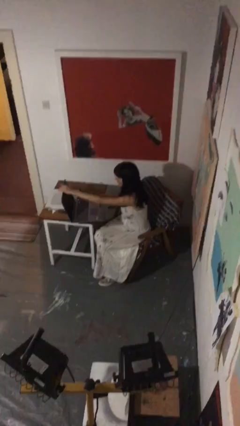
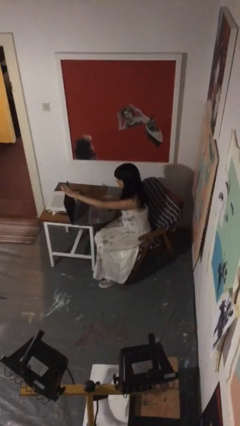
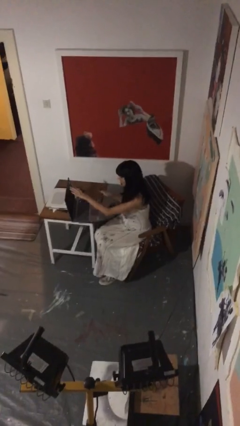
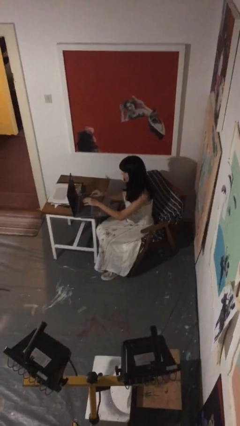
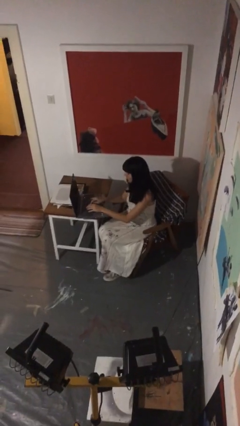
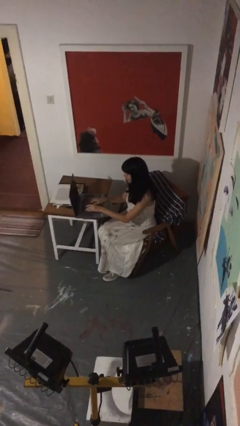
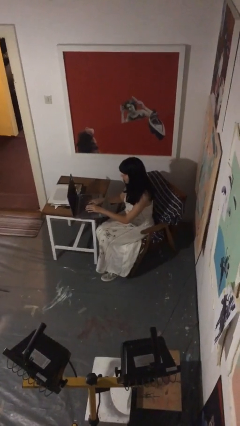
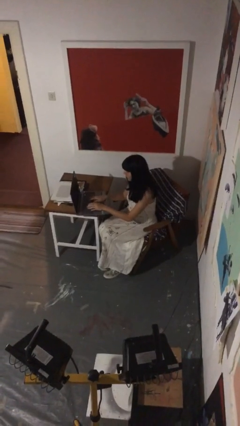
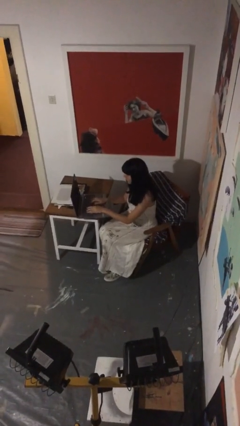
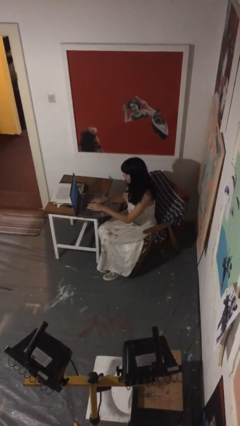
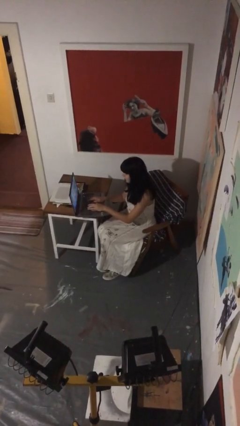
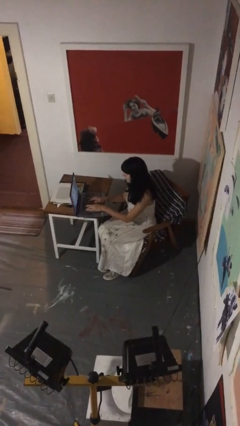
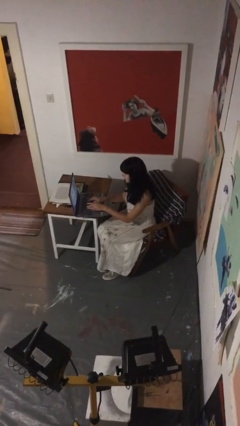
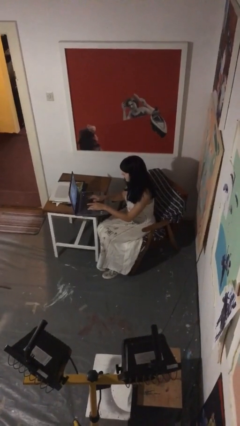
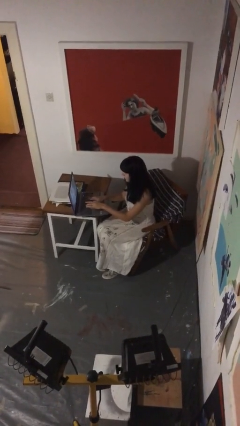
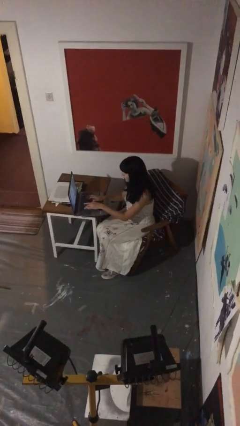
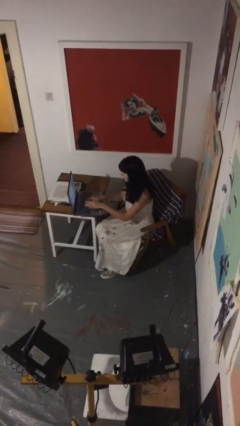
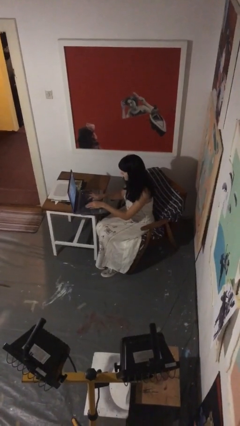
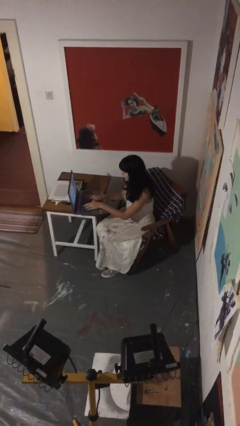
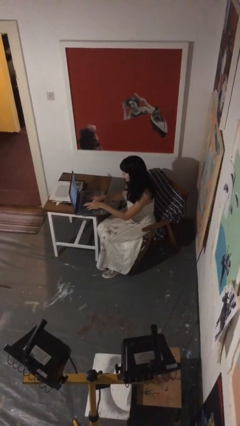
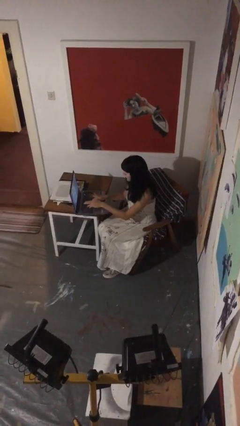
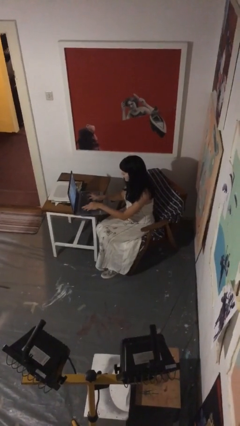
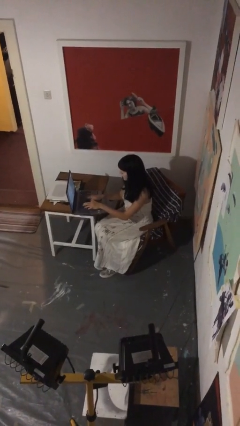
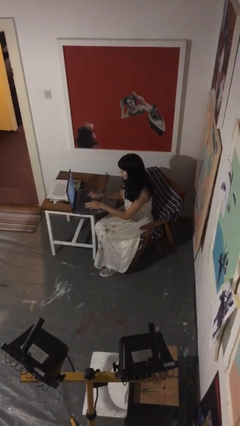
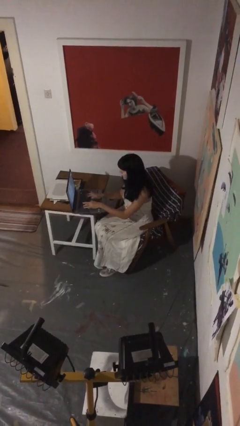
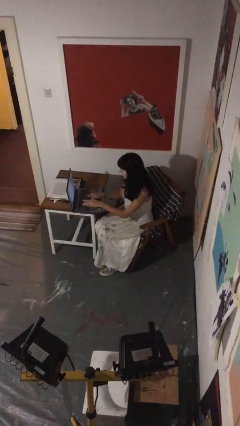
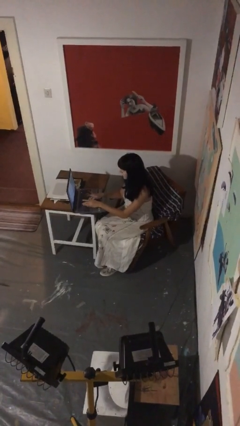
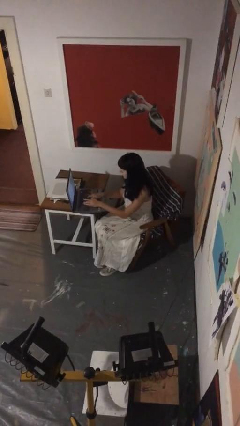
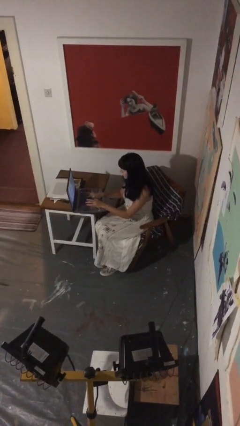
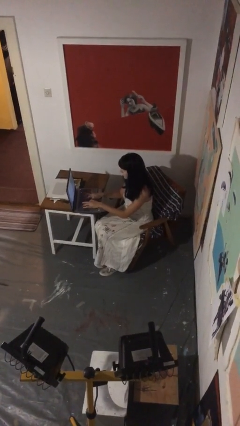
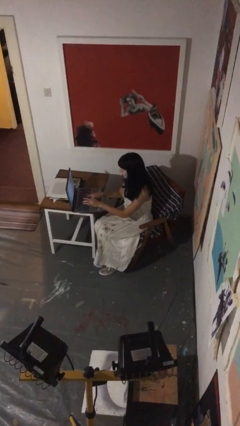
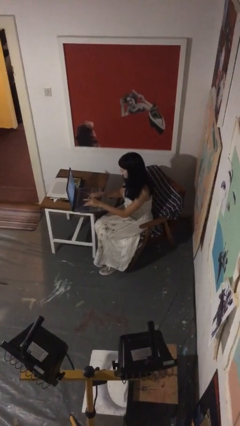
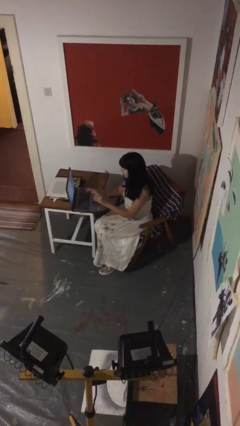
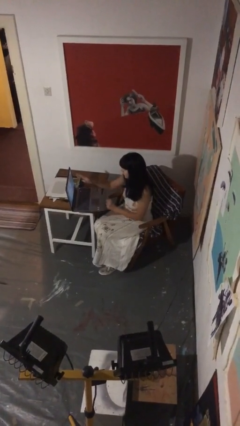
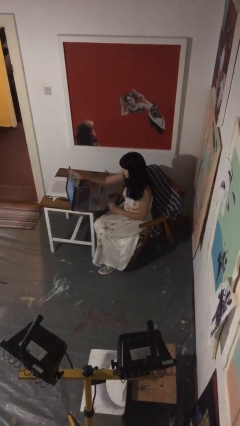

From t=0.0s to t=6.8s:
person interacts with laptop

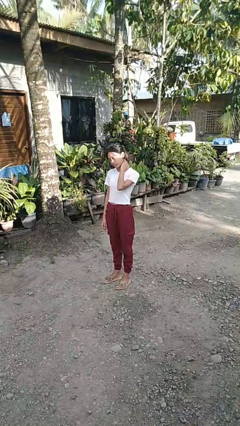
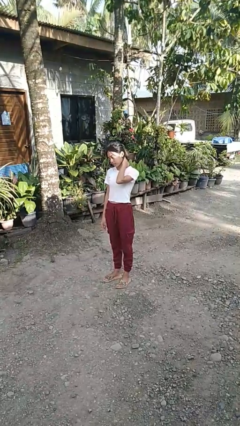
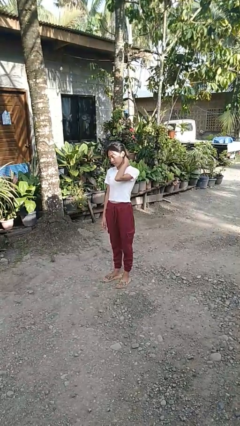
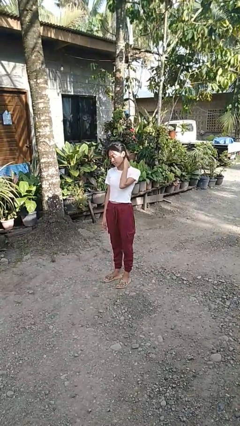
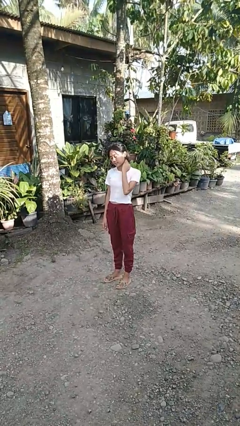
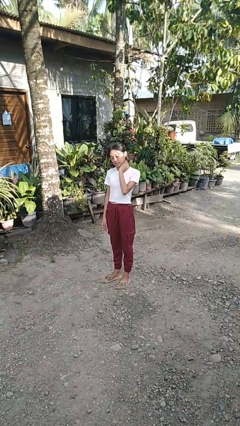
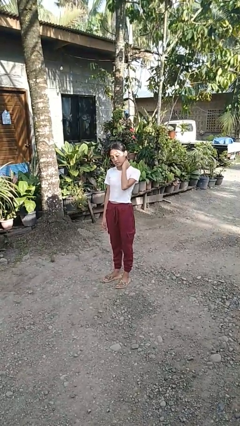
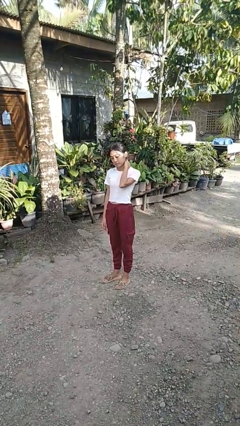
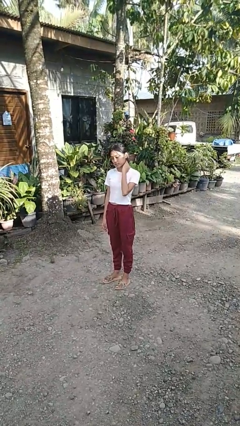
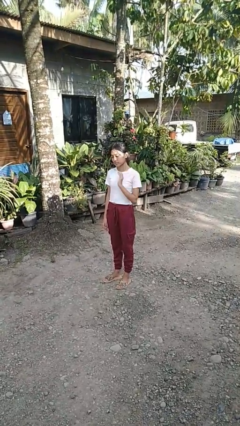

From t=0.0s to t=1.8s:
person rubs neck

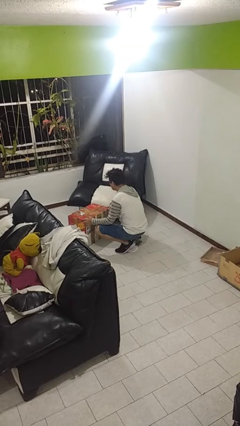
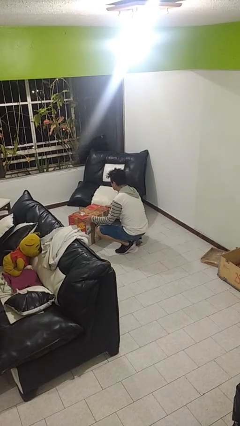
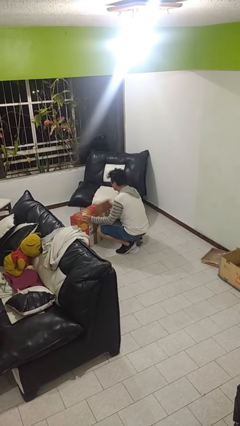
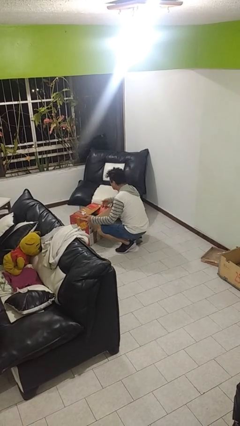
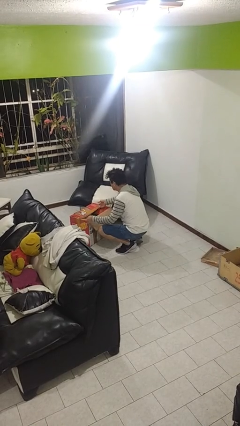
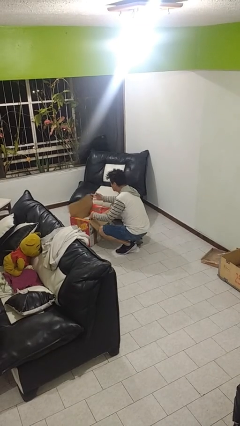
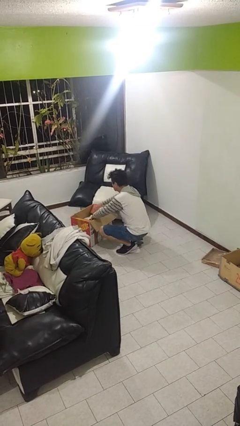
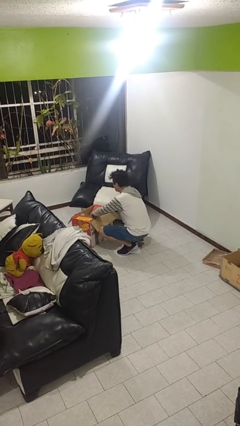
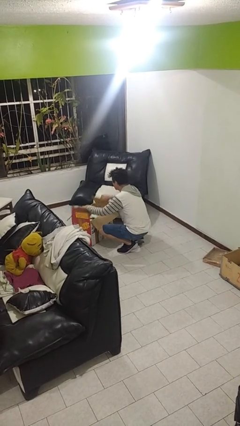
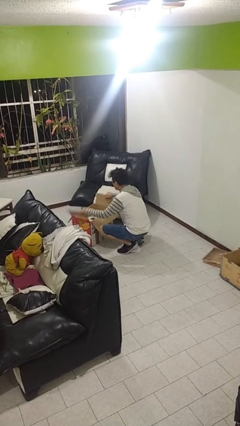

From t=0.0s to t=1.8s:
person opens box

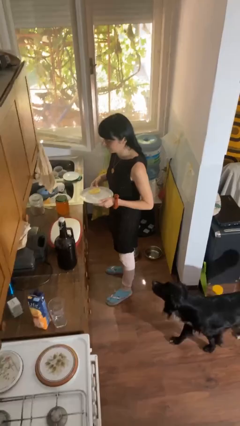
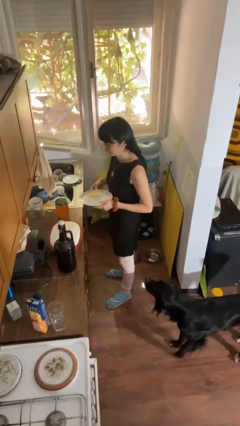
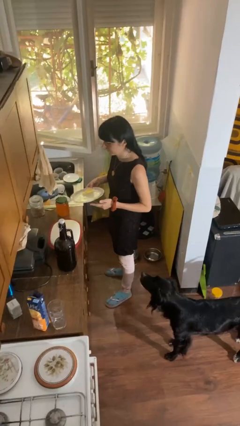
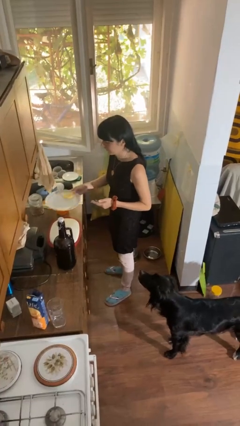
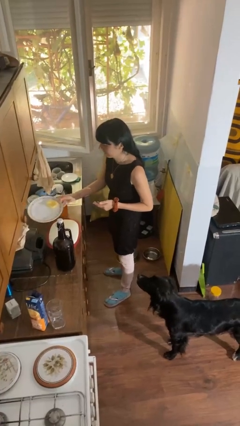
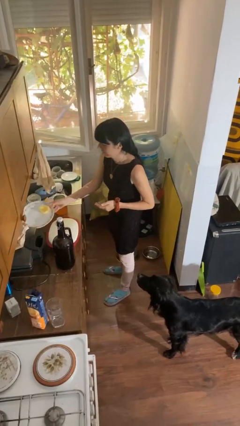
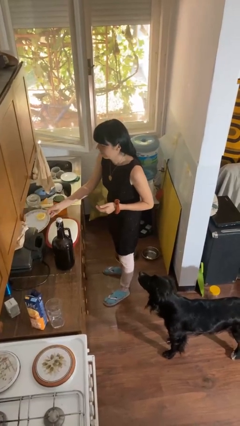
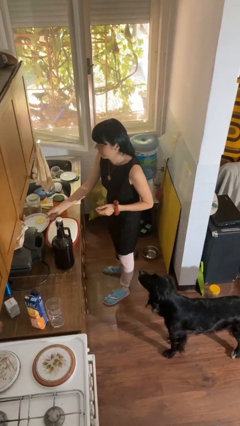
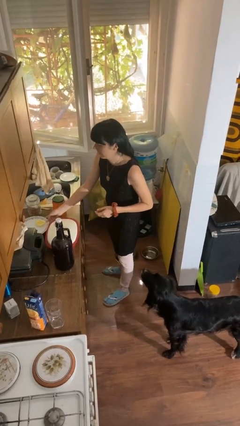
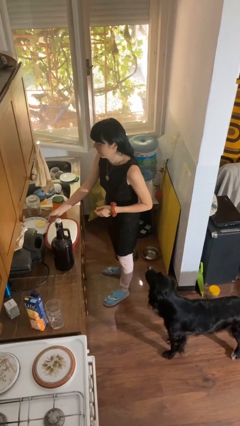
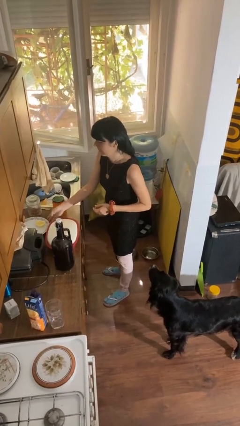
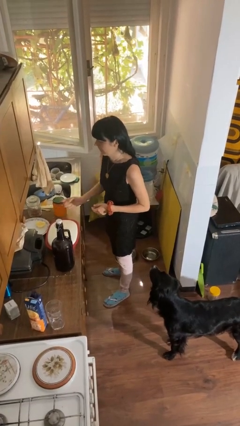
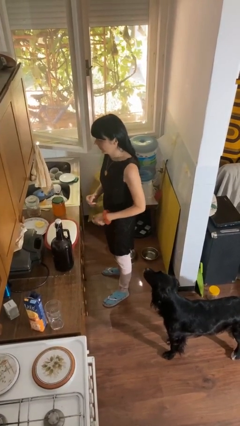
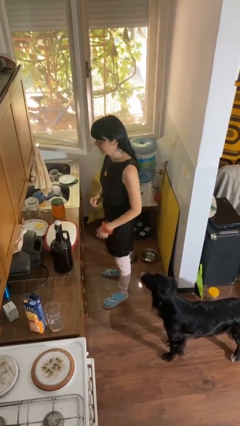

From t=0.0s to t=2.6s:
person puts down object on countertop

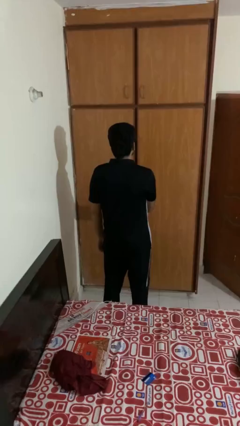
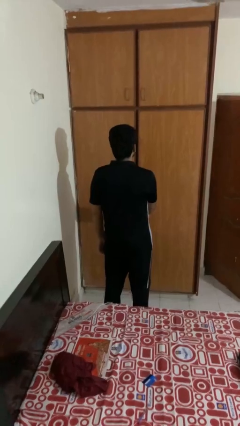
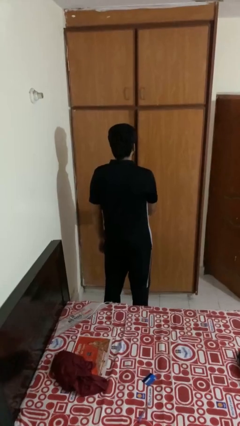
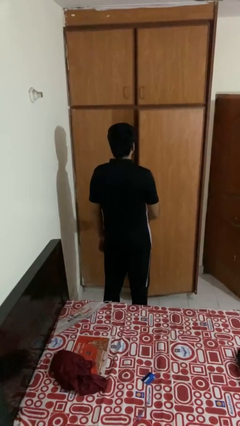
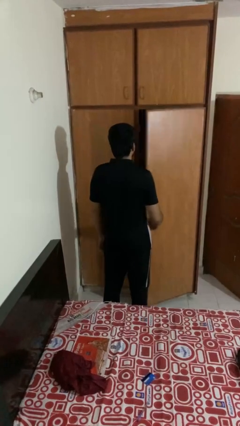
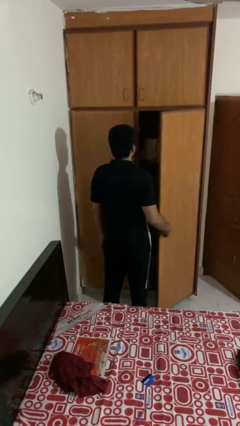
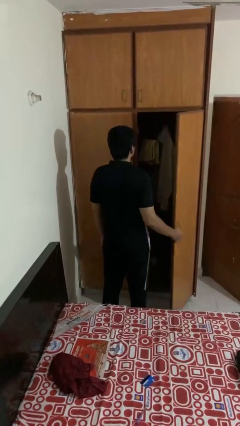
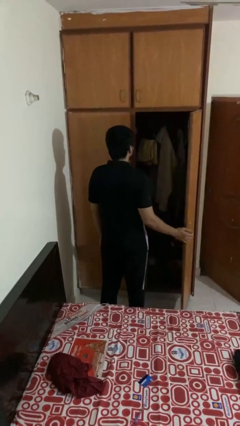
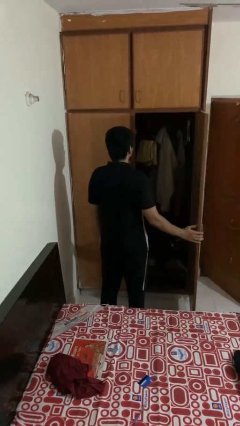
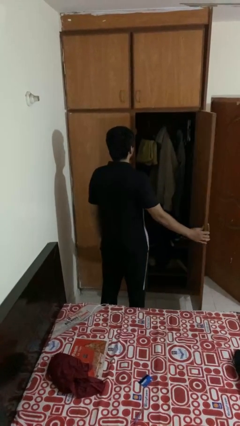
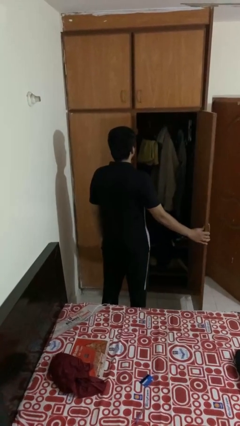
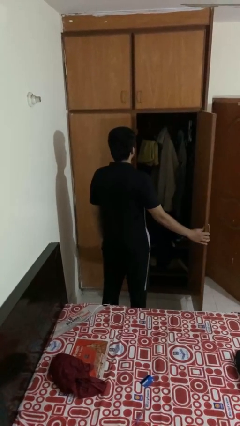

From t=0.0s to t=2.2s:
person opens closet door

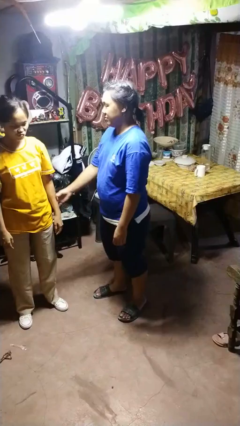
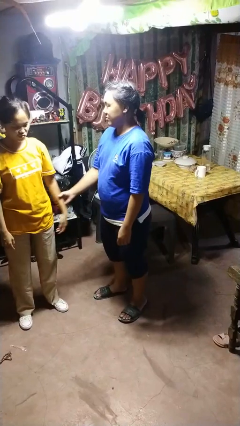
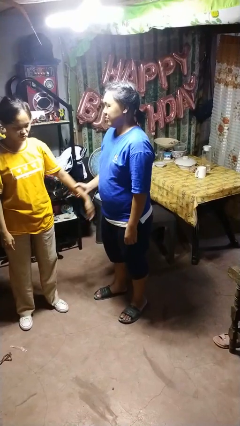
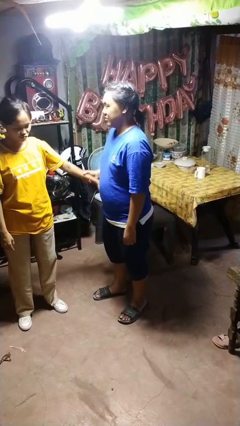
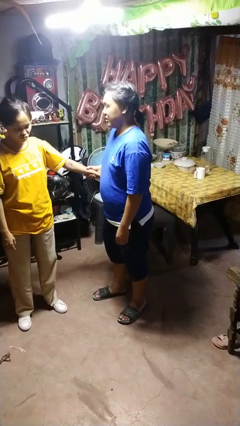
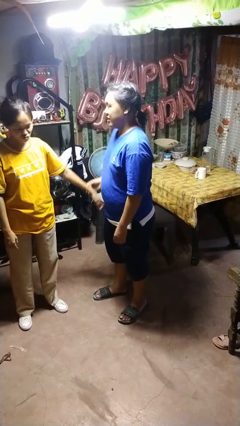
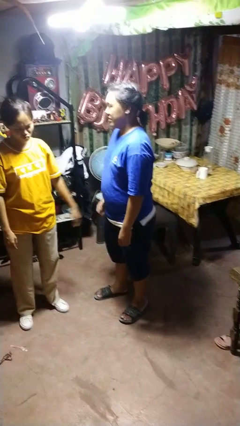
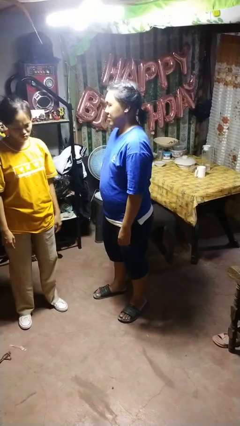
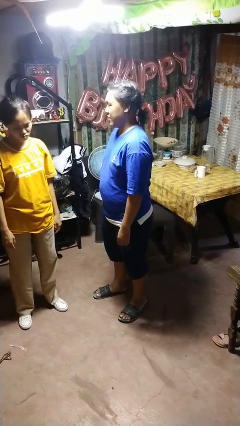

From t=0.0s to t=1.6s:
person grabs person by forearm

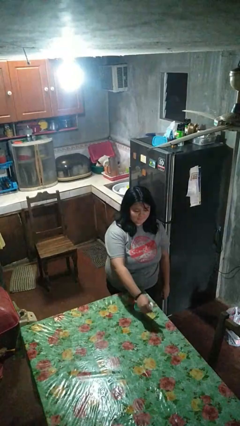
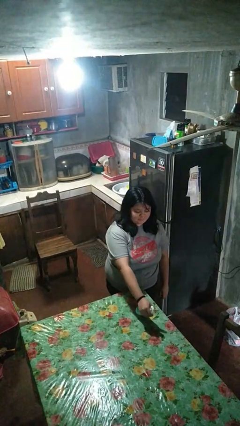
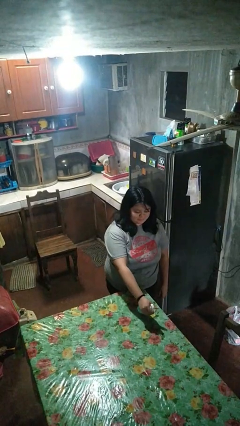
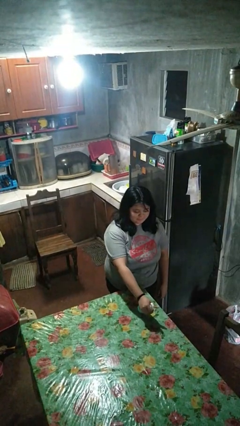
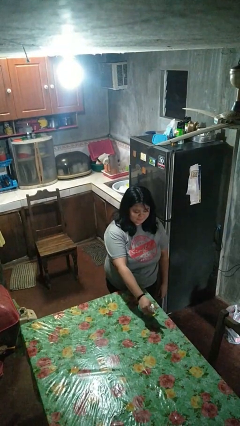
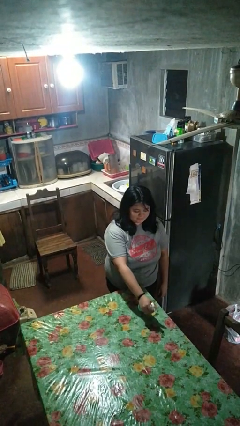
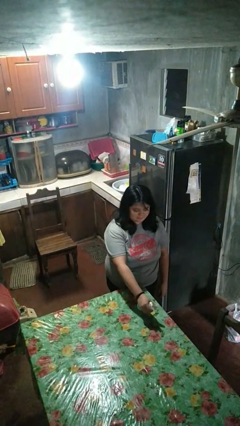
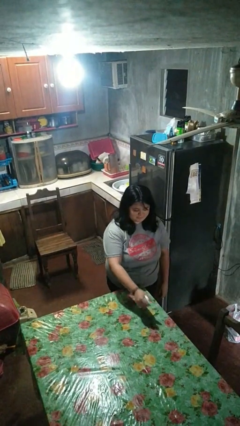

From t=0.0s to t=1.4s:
person sprays from bottle
